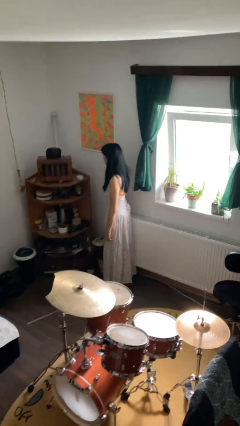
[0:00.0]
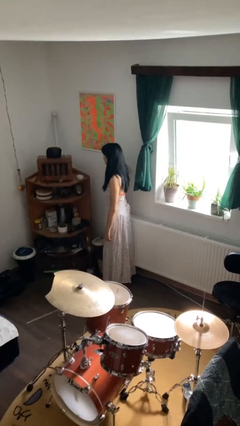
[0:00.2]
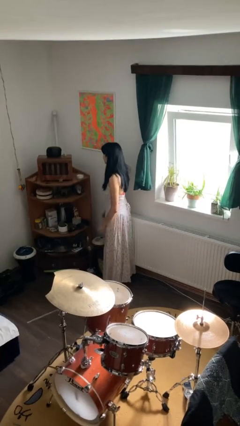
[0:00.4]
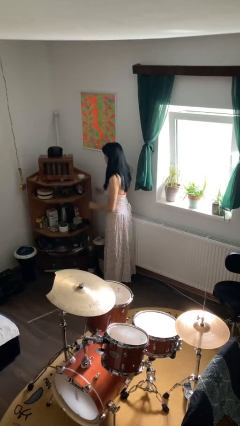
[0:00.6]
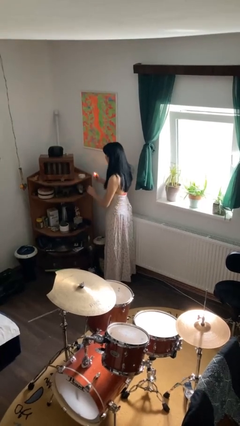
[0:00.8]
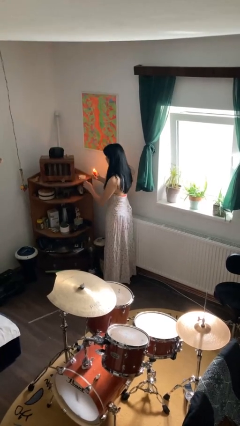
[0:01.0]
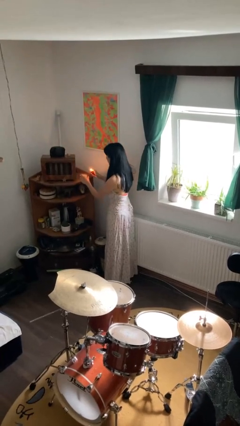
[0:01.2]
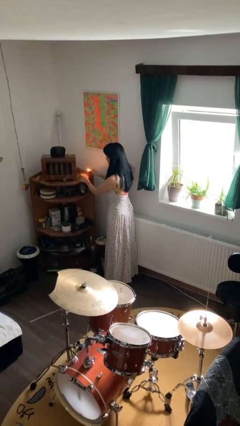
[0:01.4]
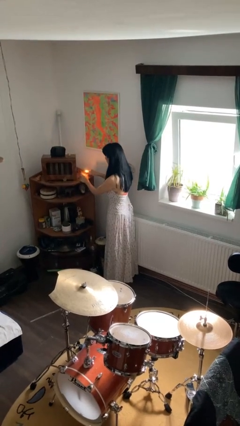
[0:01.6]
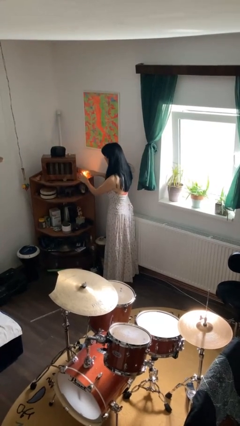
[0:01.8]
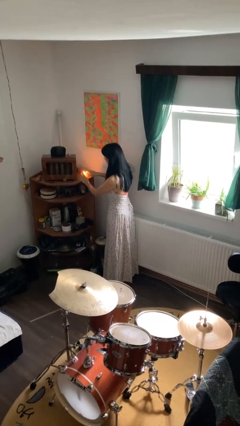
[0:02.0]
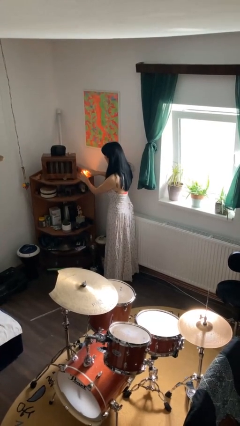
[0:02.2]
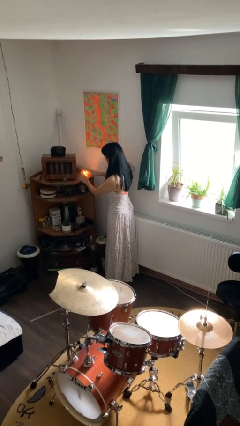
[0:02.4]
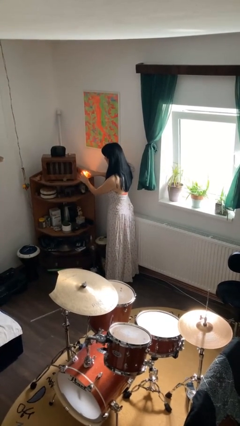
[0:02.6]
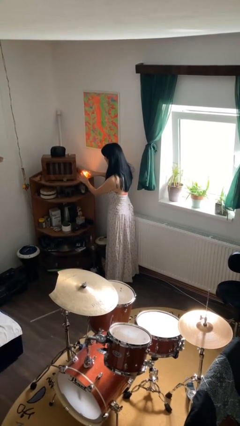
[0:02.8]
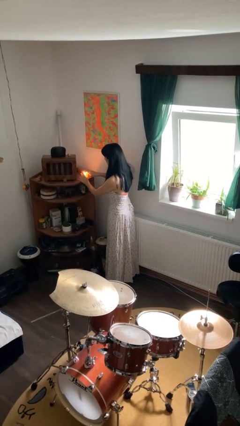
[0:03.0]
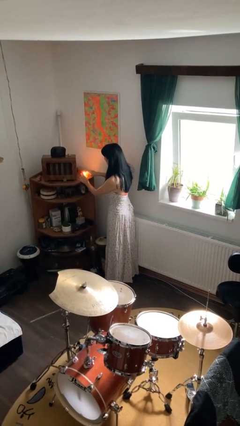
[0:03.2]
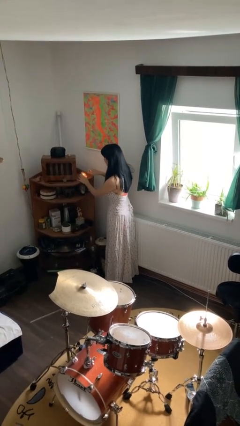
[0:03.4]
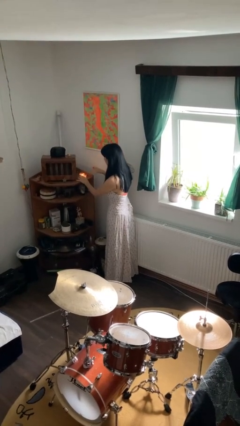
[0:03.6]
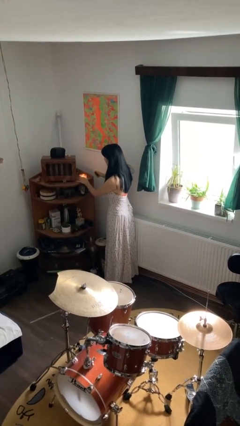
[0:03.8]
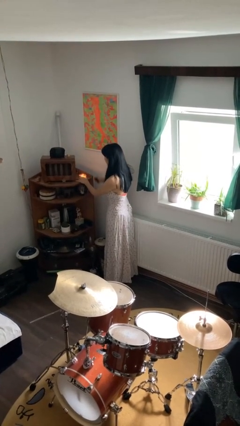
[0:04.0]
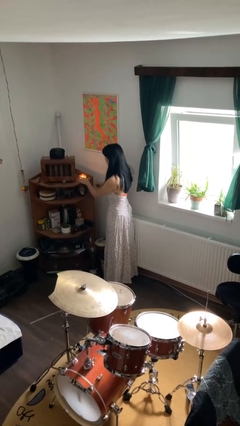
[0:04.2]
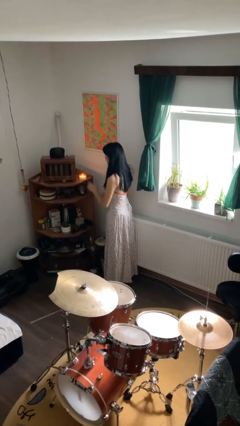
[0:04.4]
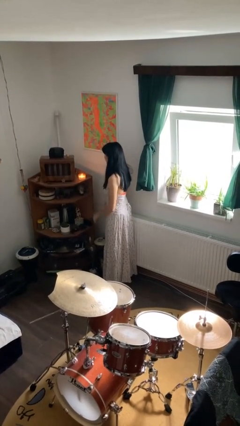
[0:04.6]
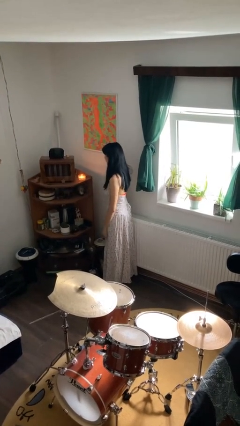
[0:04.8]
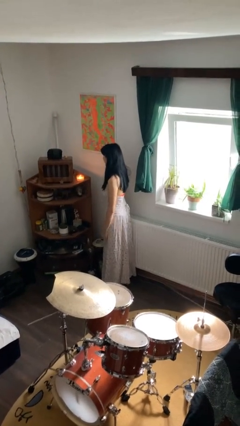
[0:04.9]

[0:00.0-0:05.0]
person lights candle

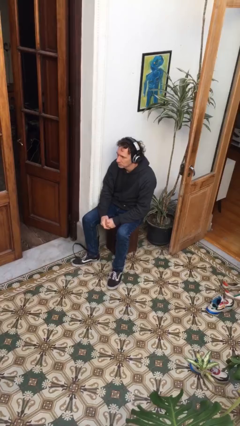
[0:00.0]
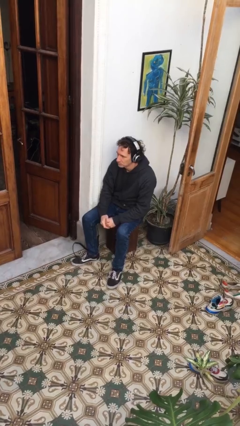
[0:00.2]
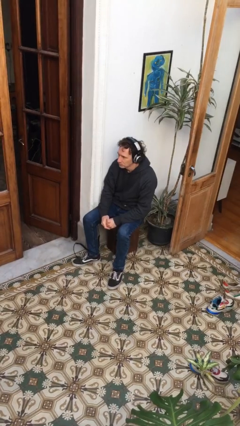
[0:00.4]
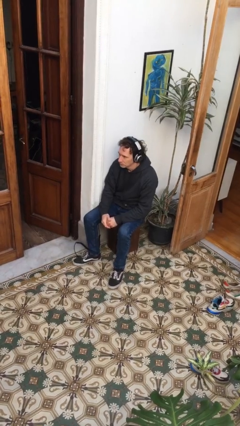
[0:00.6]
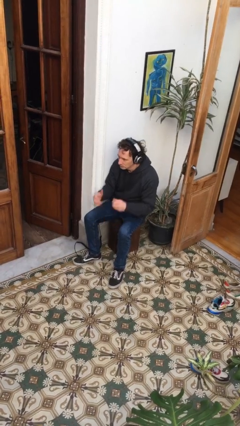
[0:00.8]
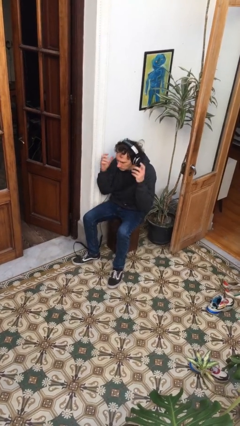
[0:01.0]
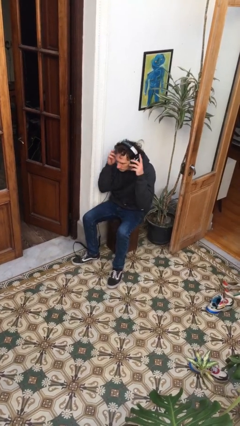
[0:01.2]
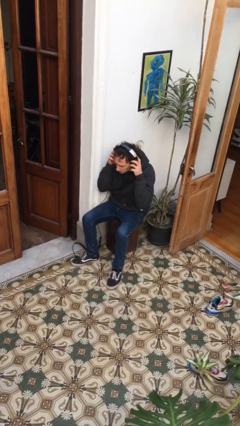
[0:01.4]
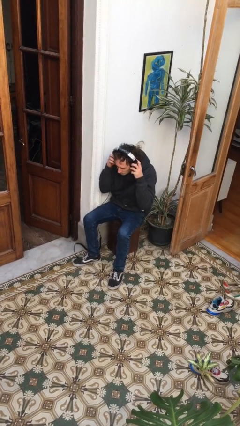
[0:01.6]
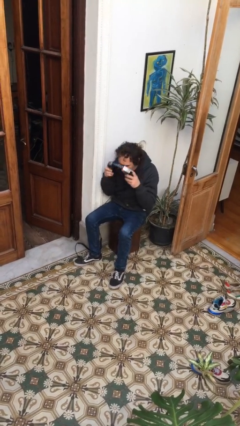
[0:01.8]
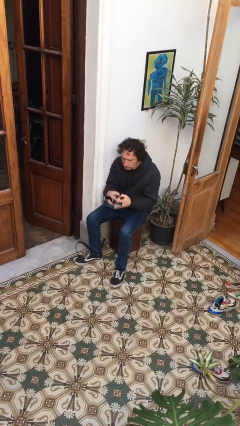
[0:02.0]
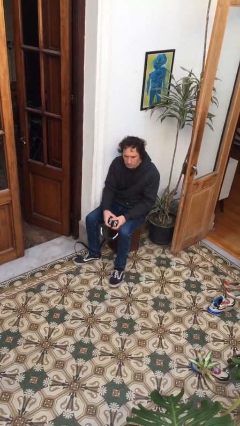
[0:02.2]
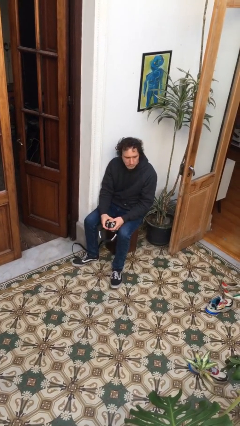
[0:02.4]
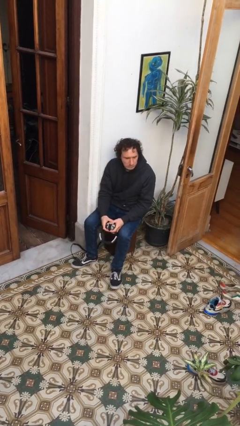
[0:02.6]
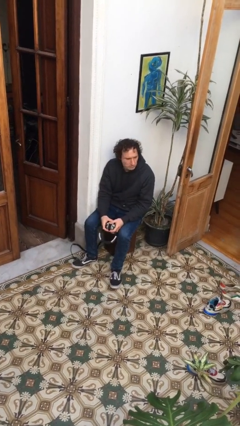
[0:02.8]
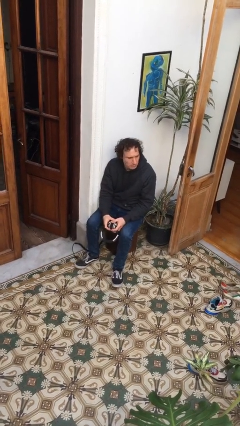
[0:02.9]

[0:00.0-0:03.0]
person takes off headphones

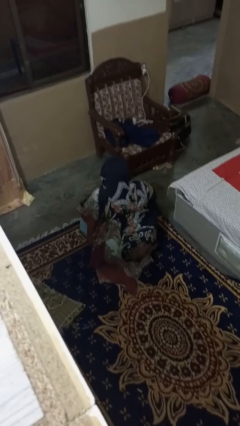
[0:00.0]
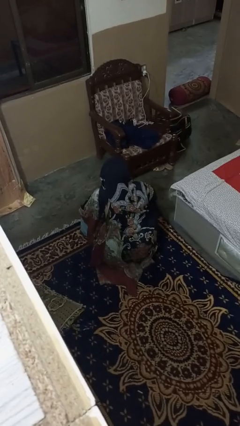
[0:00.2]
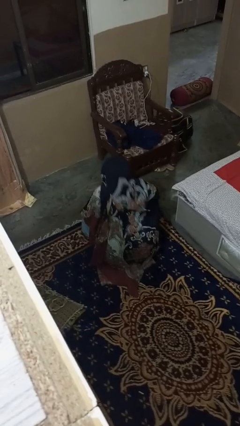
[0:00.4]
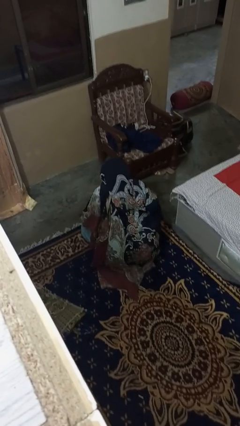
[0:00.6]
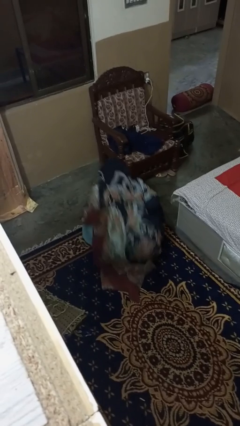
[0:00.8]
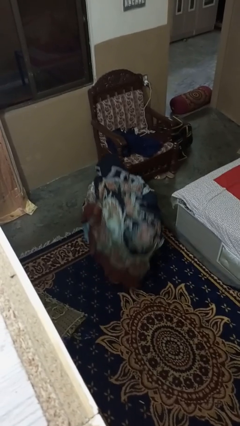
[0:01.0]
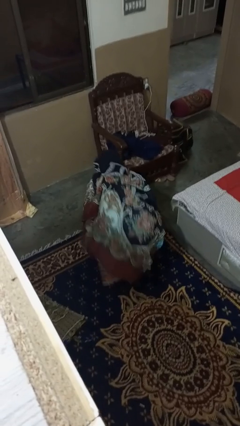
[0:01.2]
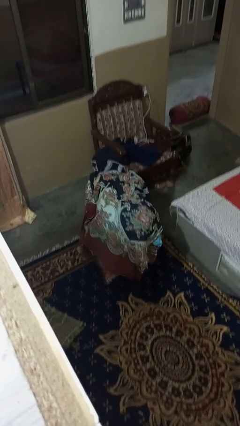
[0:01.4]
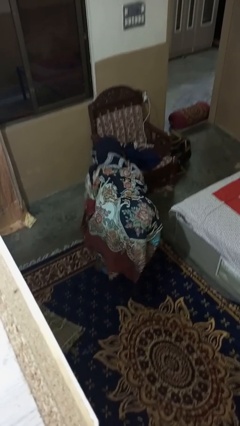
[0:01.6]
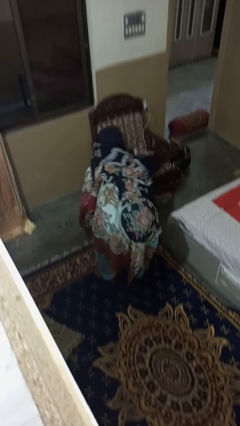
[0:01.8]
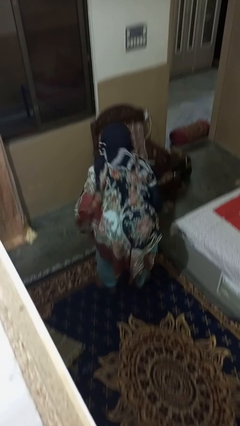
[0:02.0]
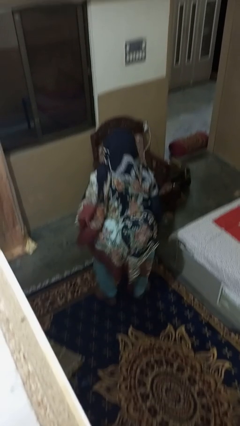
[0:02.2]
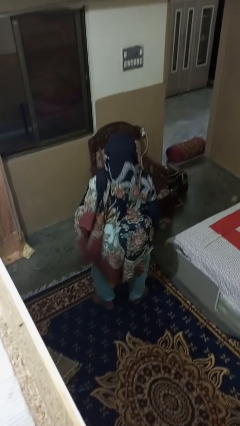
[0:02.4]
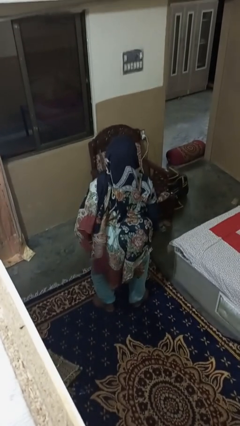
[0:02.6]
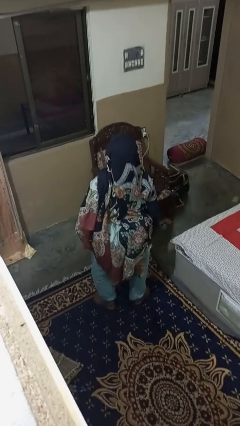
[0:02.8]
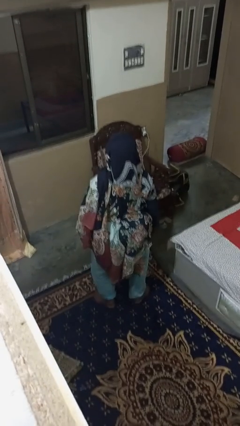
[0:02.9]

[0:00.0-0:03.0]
person stands up

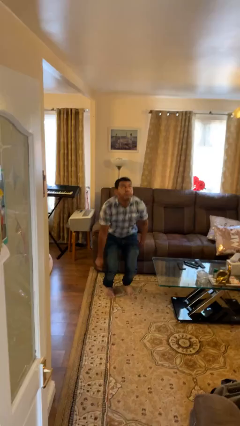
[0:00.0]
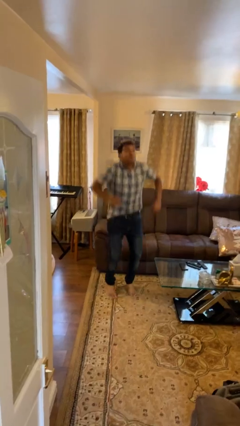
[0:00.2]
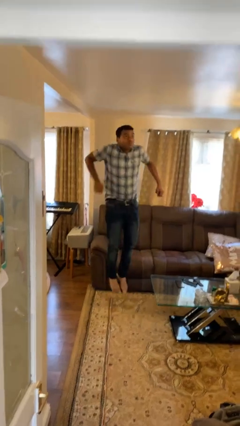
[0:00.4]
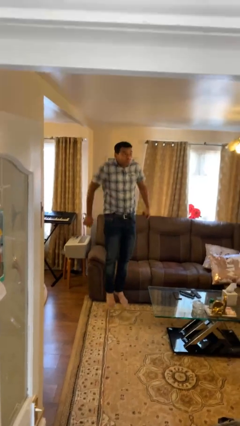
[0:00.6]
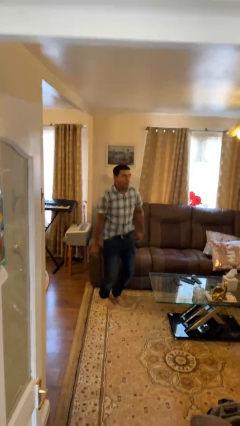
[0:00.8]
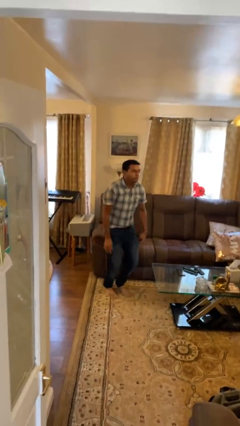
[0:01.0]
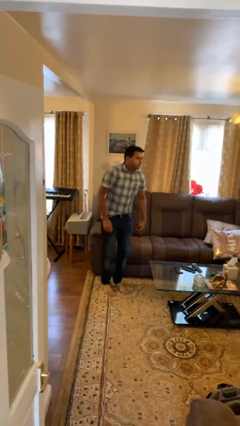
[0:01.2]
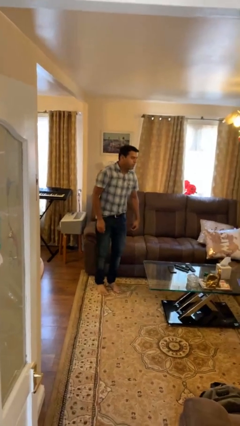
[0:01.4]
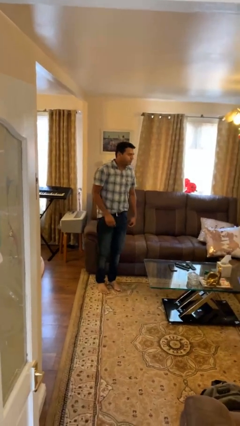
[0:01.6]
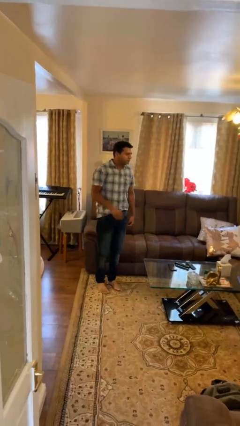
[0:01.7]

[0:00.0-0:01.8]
person jumps

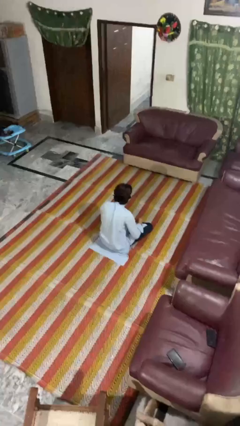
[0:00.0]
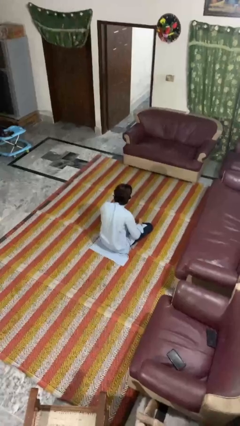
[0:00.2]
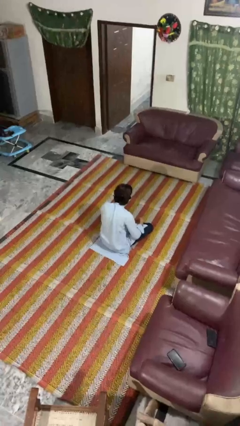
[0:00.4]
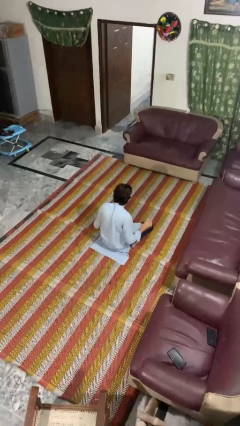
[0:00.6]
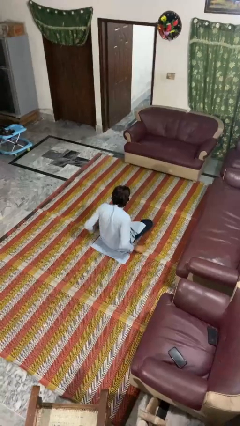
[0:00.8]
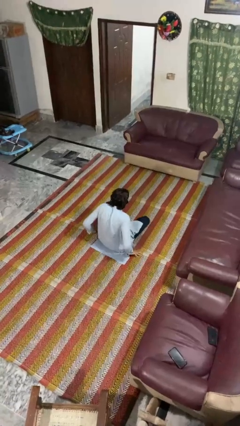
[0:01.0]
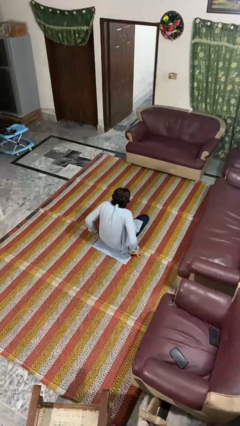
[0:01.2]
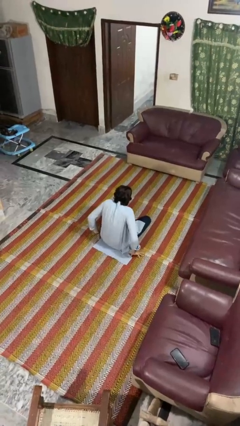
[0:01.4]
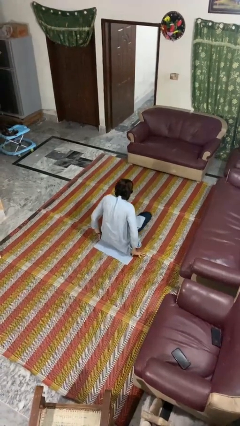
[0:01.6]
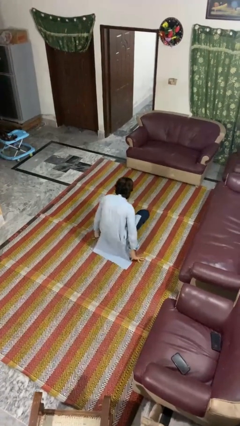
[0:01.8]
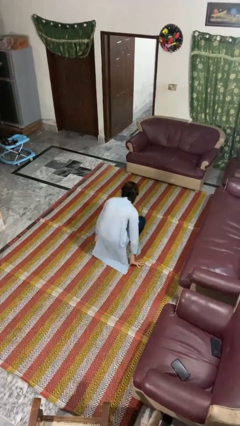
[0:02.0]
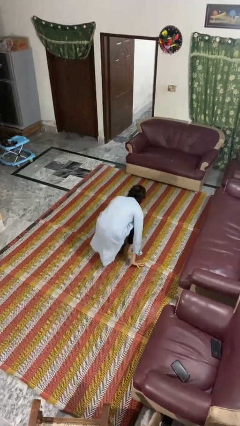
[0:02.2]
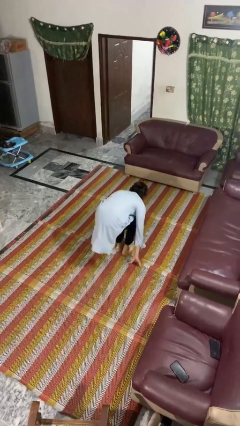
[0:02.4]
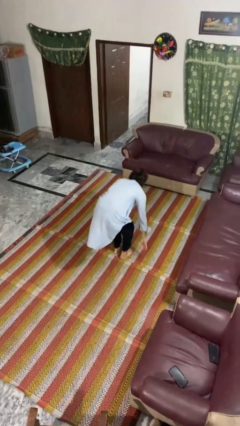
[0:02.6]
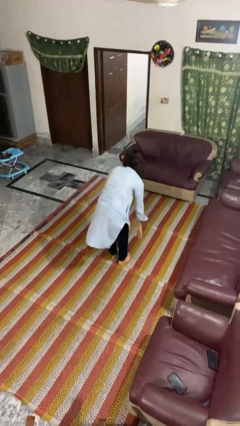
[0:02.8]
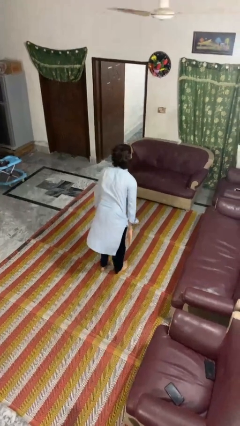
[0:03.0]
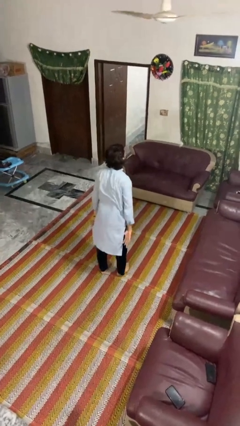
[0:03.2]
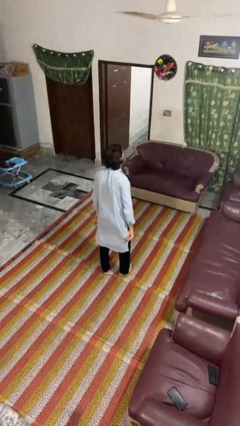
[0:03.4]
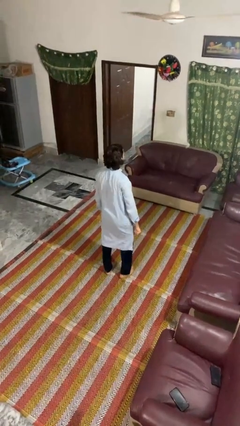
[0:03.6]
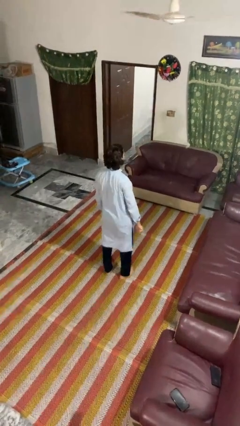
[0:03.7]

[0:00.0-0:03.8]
person stands up from floor

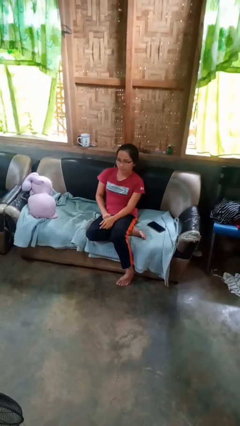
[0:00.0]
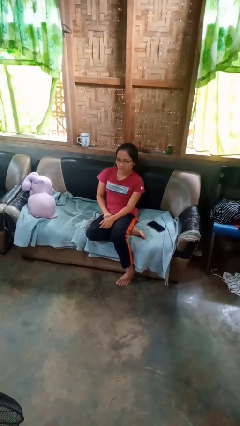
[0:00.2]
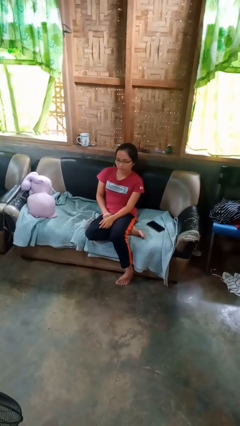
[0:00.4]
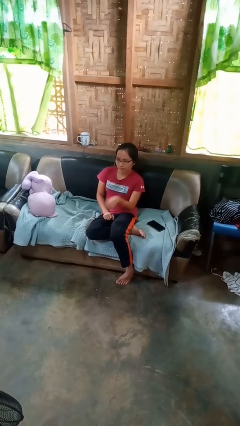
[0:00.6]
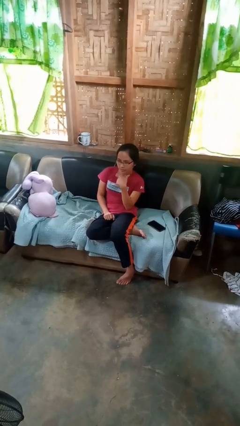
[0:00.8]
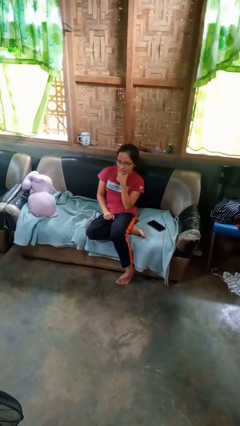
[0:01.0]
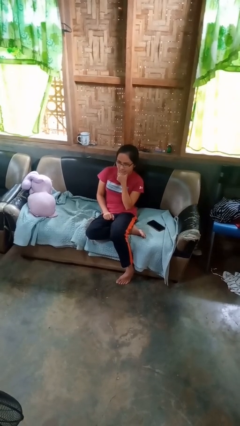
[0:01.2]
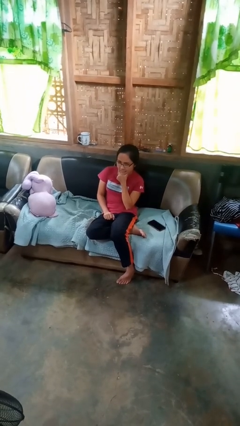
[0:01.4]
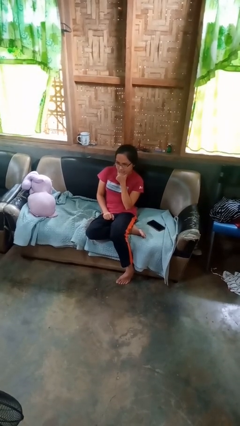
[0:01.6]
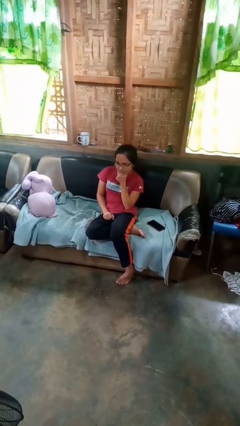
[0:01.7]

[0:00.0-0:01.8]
person strokes chin
